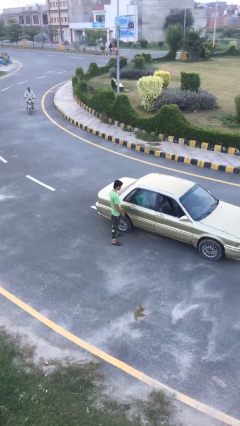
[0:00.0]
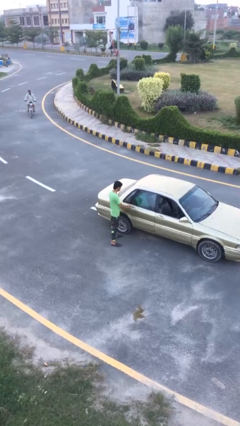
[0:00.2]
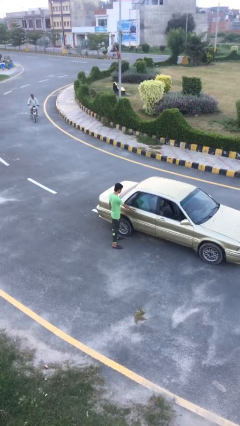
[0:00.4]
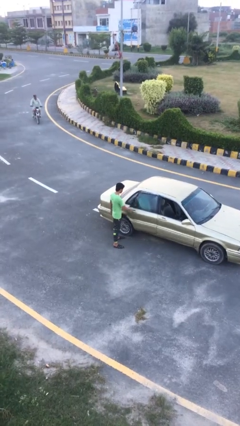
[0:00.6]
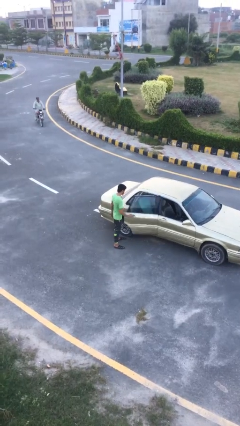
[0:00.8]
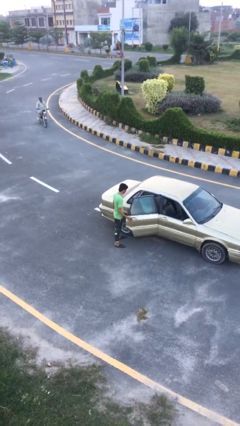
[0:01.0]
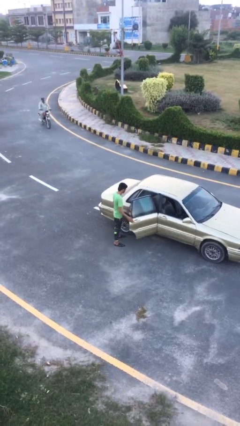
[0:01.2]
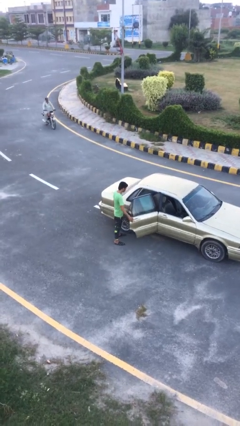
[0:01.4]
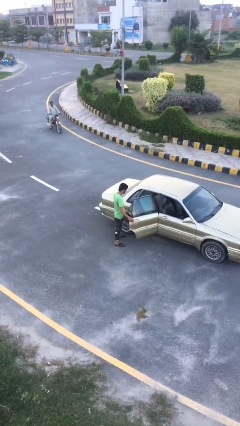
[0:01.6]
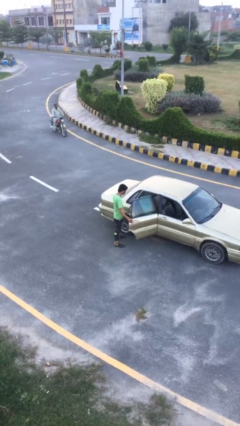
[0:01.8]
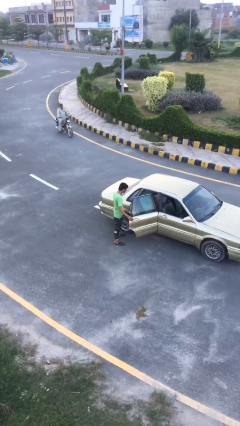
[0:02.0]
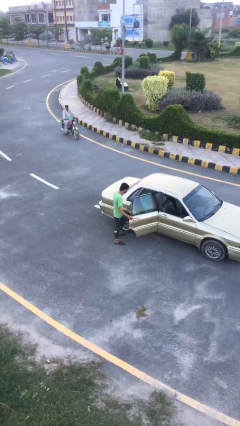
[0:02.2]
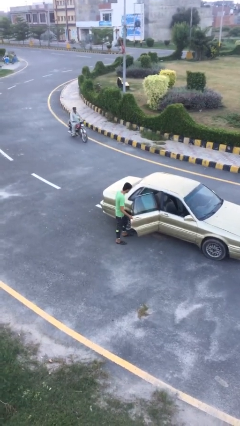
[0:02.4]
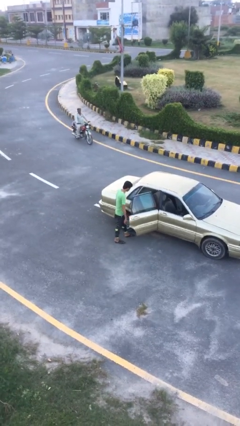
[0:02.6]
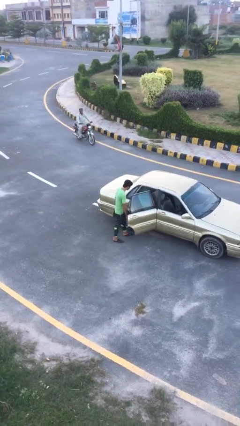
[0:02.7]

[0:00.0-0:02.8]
person opens car door

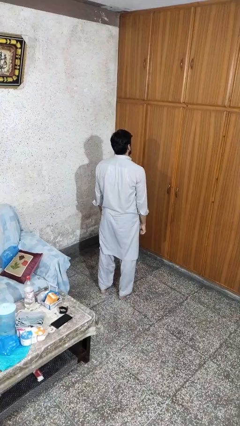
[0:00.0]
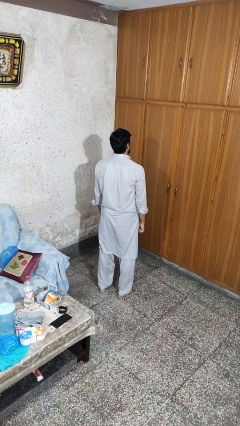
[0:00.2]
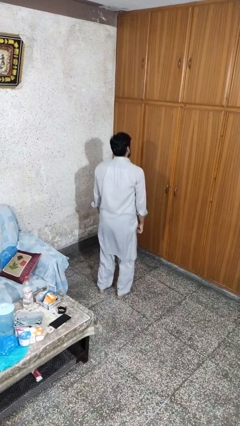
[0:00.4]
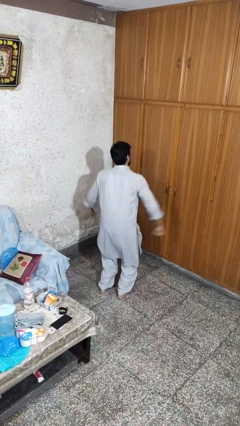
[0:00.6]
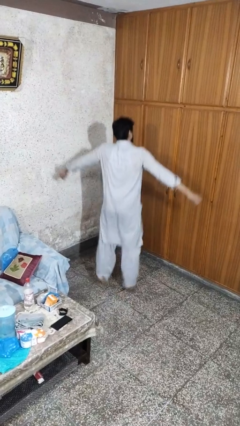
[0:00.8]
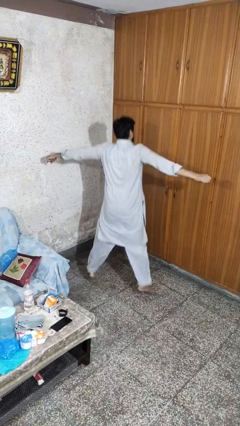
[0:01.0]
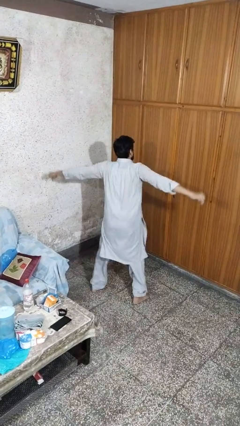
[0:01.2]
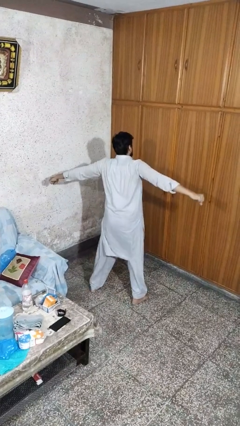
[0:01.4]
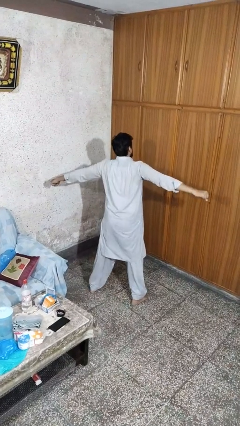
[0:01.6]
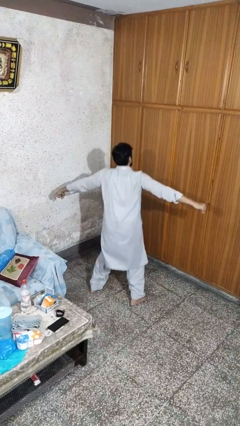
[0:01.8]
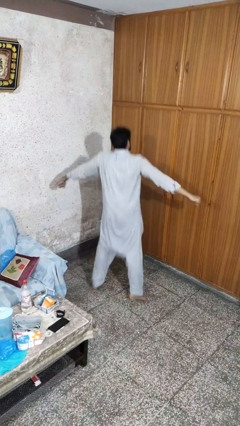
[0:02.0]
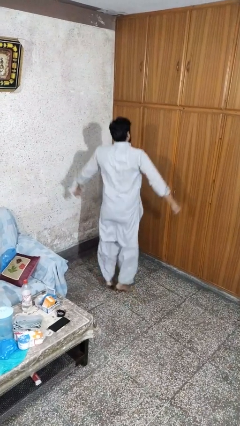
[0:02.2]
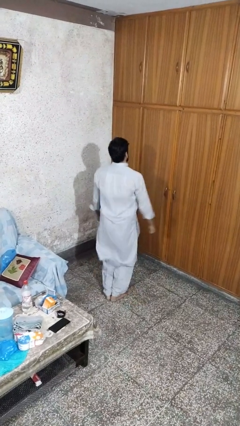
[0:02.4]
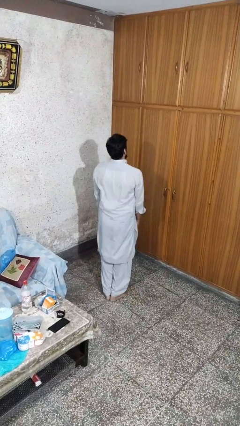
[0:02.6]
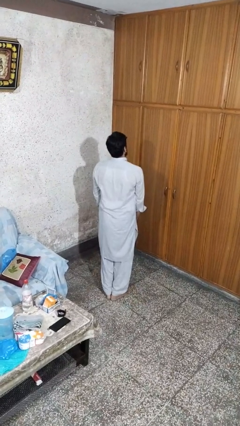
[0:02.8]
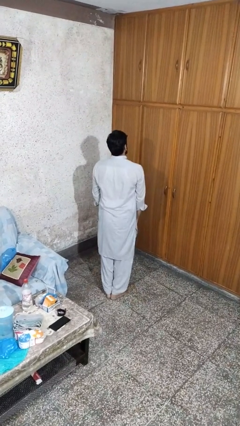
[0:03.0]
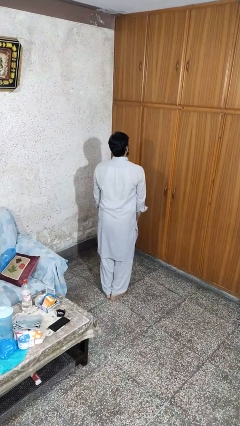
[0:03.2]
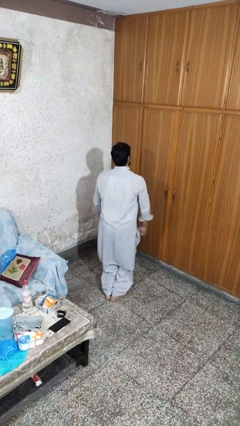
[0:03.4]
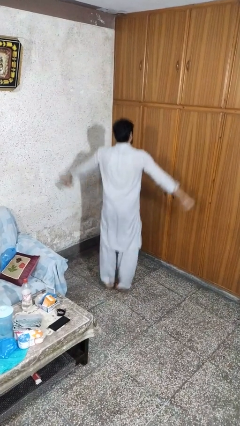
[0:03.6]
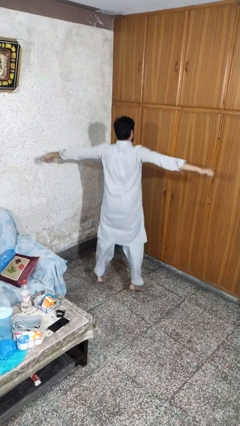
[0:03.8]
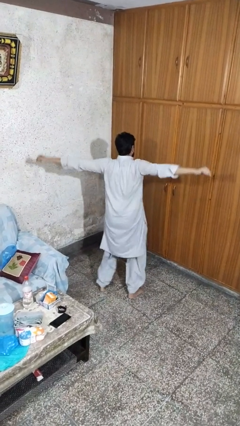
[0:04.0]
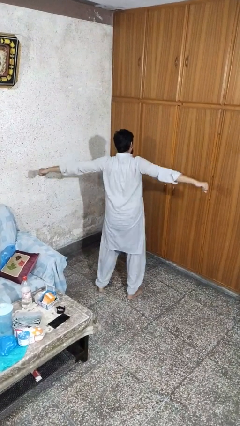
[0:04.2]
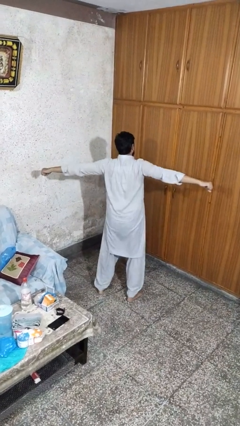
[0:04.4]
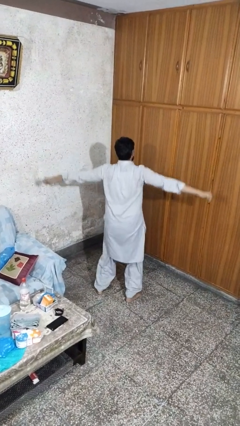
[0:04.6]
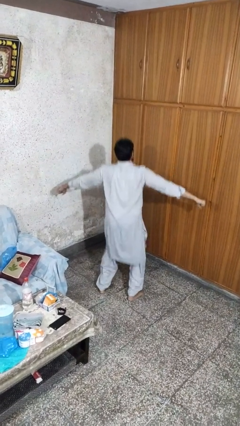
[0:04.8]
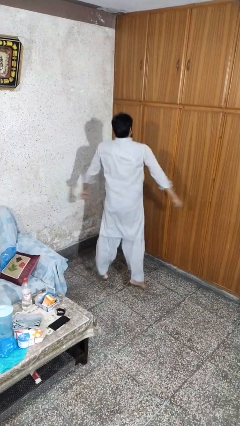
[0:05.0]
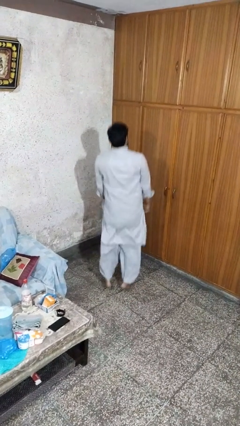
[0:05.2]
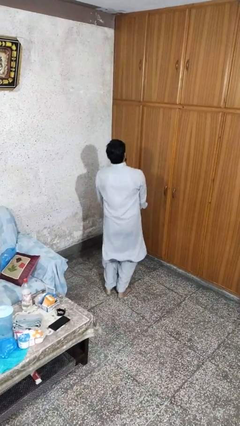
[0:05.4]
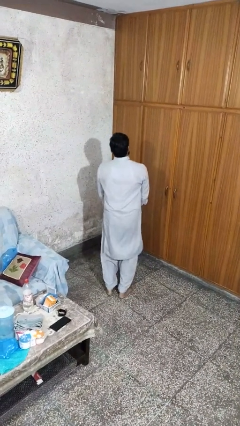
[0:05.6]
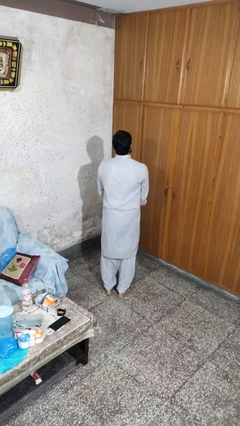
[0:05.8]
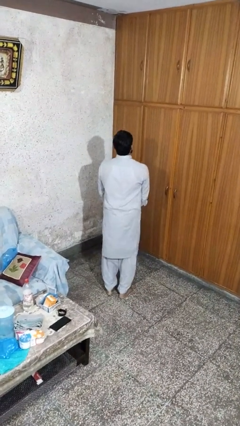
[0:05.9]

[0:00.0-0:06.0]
person exercises with jumping jacks

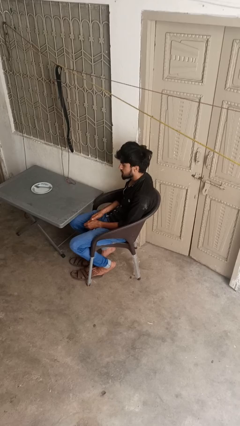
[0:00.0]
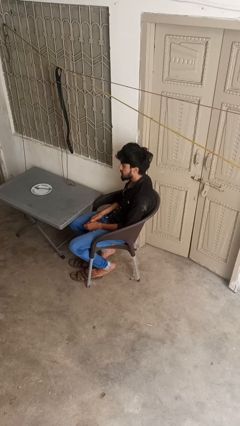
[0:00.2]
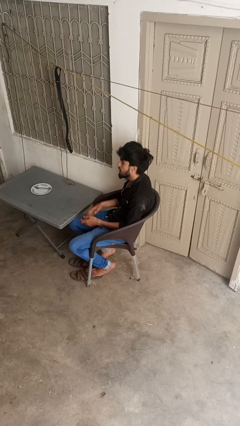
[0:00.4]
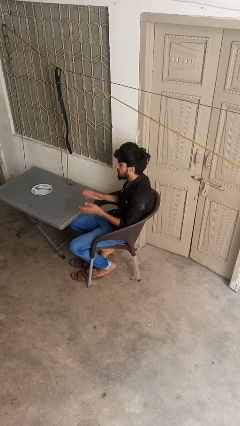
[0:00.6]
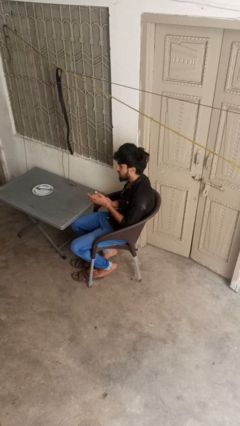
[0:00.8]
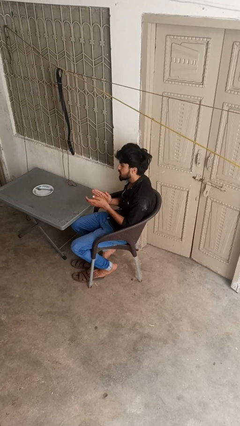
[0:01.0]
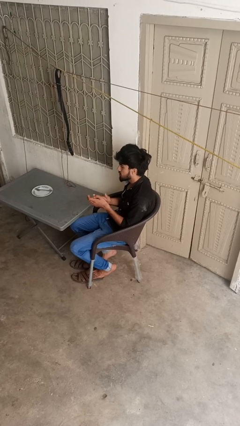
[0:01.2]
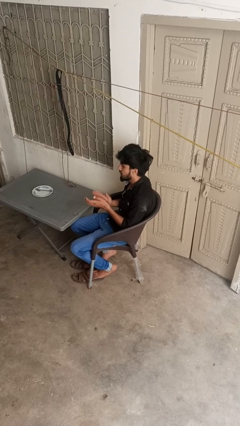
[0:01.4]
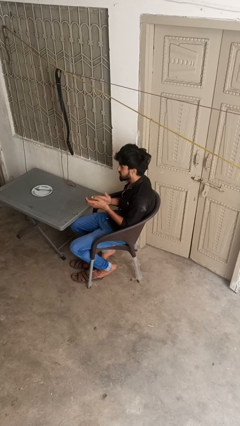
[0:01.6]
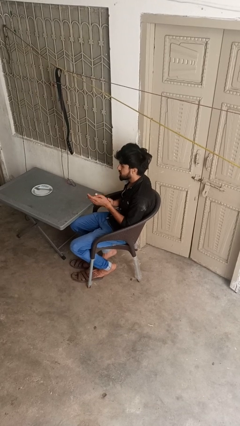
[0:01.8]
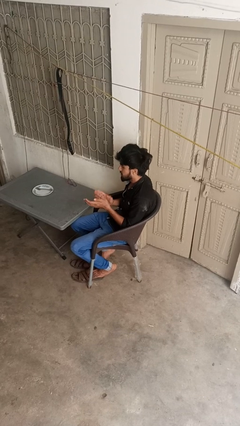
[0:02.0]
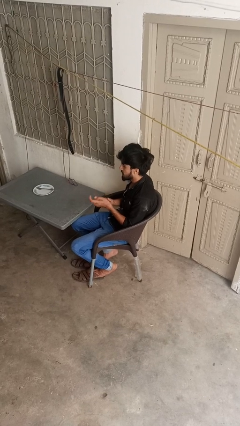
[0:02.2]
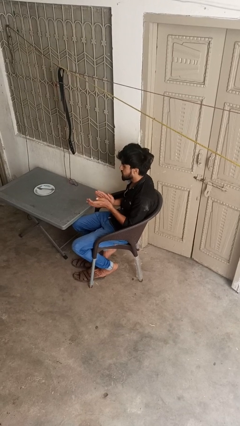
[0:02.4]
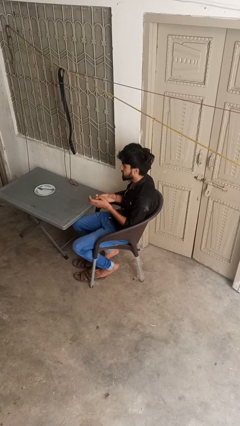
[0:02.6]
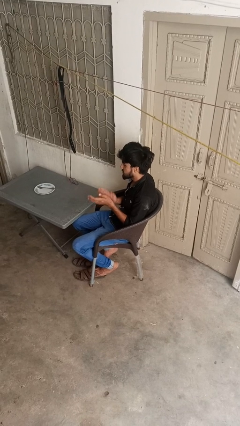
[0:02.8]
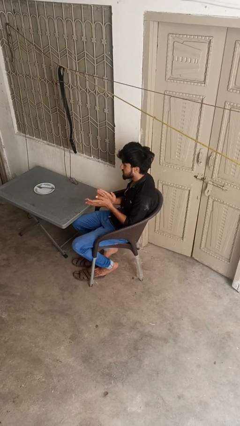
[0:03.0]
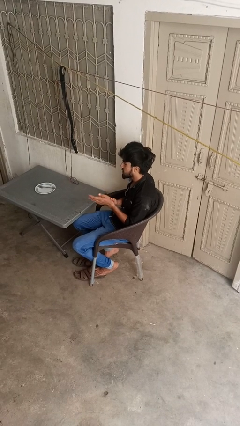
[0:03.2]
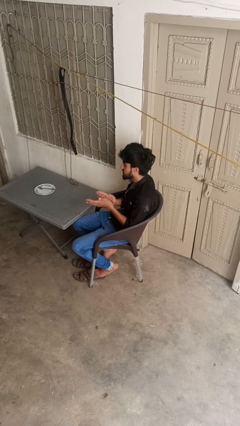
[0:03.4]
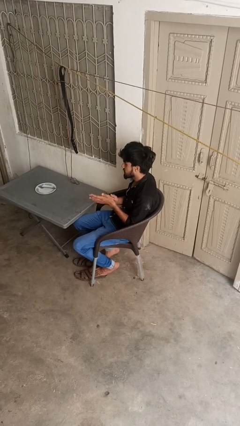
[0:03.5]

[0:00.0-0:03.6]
person claps hands

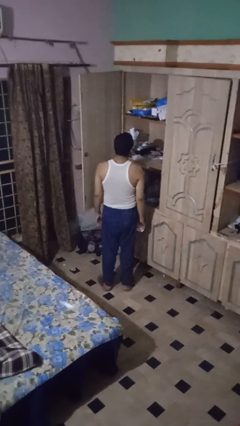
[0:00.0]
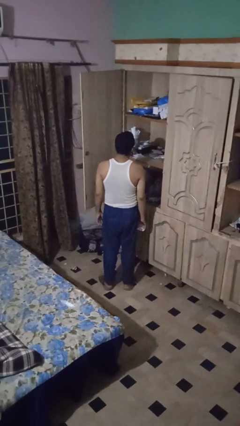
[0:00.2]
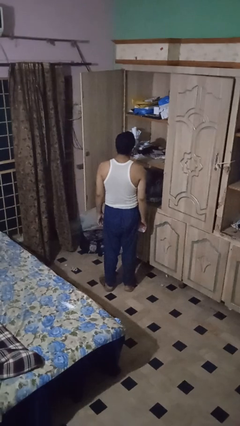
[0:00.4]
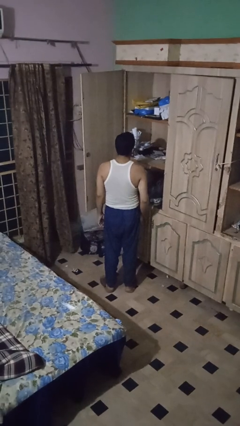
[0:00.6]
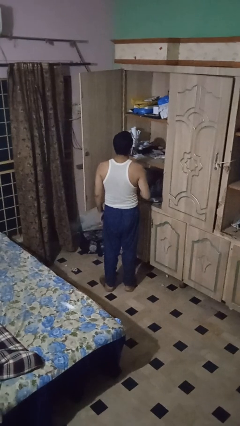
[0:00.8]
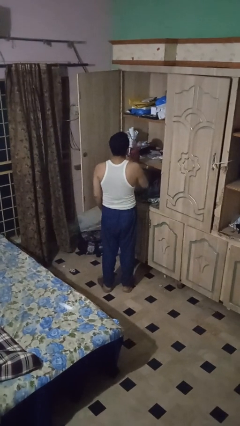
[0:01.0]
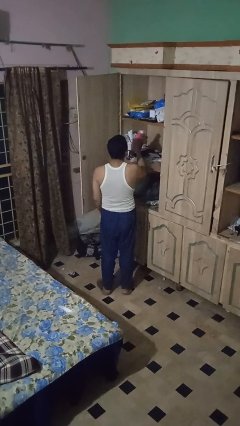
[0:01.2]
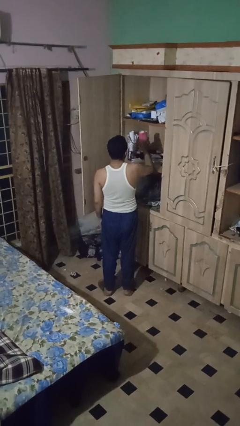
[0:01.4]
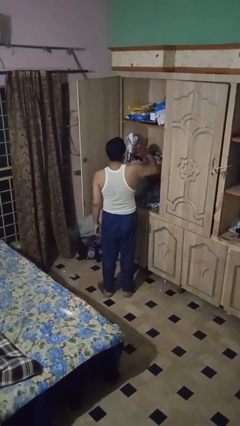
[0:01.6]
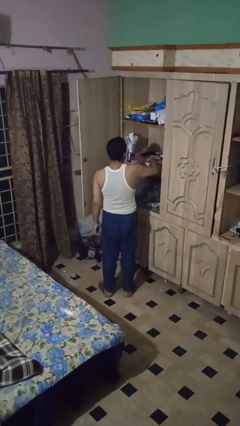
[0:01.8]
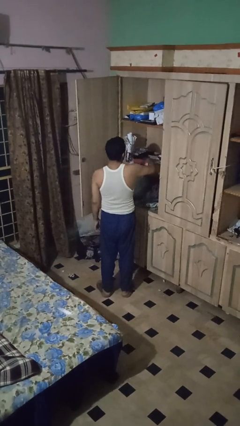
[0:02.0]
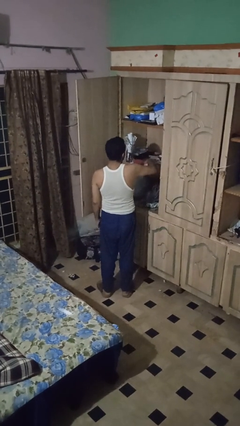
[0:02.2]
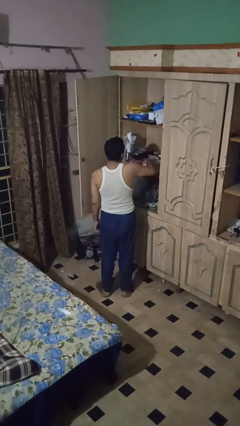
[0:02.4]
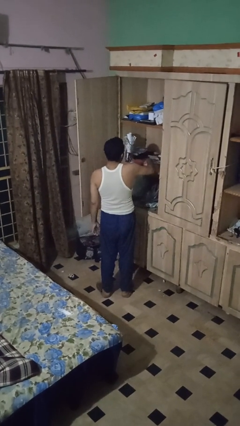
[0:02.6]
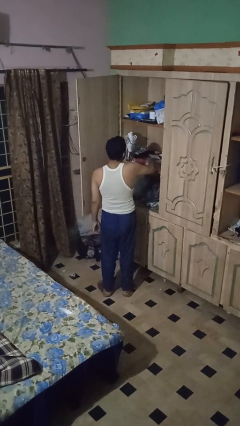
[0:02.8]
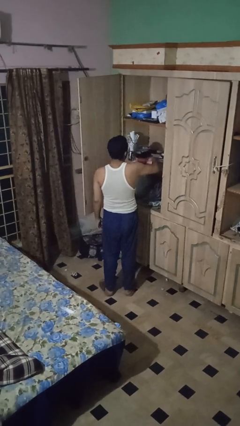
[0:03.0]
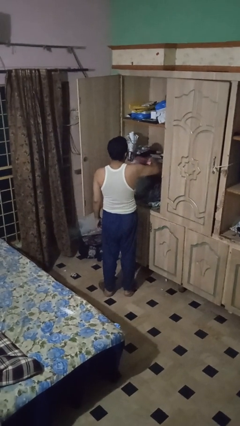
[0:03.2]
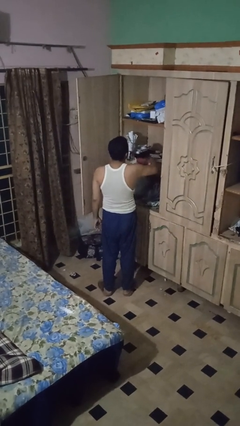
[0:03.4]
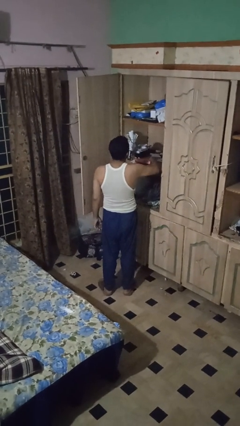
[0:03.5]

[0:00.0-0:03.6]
person dusts furniture

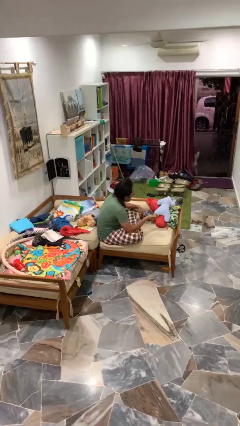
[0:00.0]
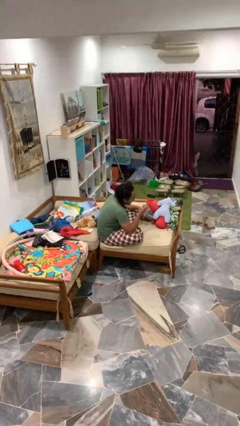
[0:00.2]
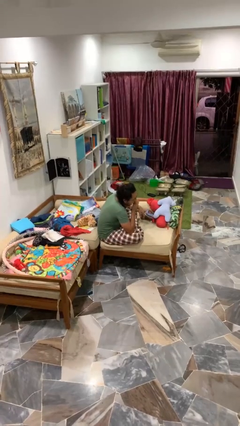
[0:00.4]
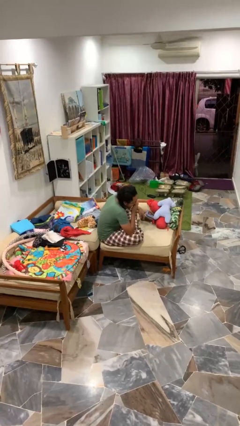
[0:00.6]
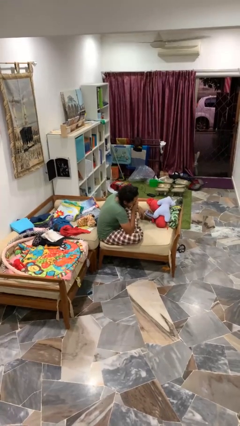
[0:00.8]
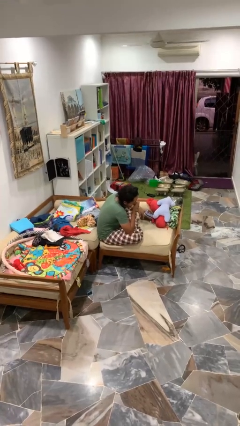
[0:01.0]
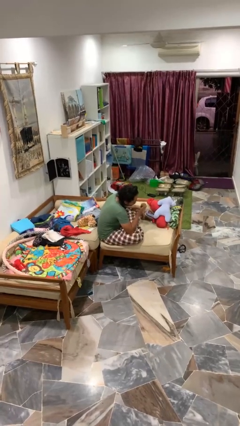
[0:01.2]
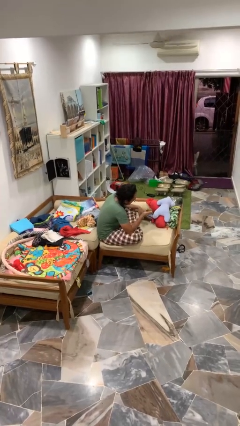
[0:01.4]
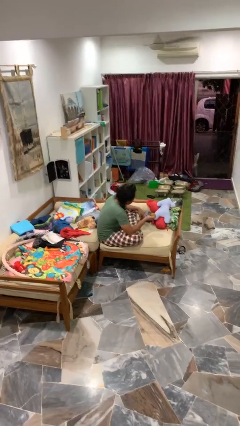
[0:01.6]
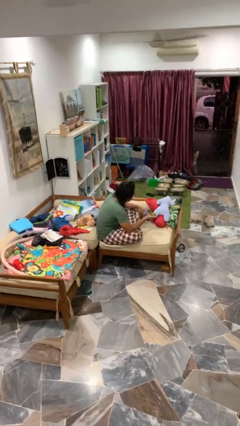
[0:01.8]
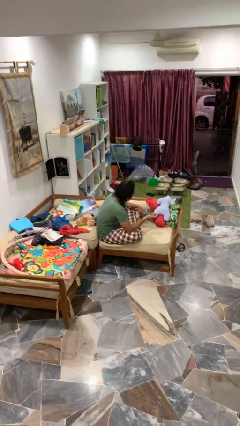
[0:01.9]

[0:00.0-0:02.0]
person eats apple
